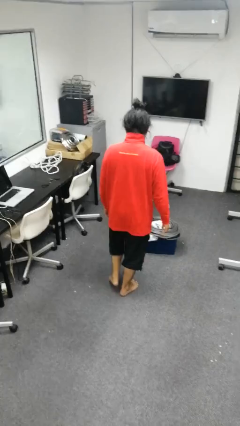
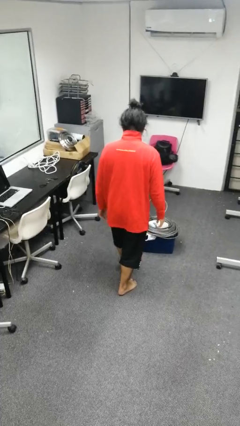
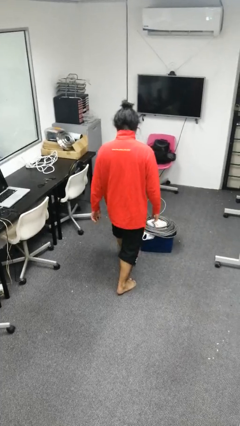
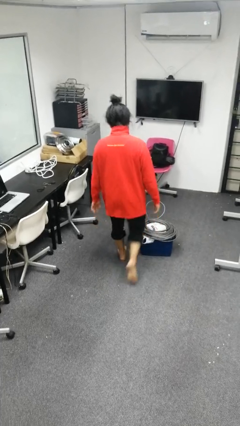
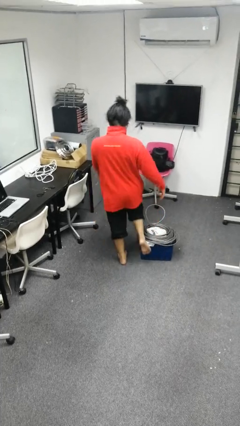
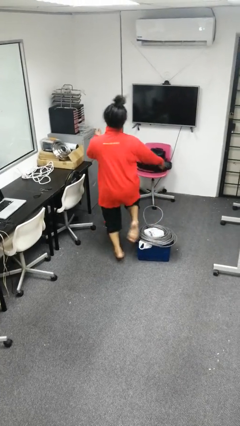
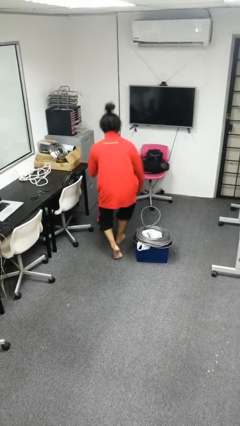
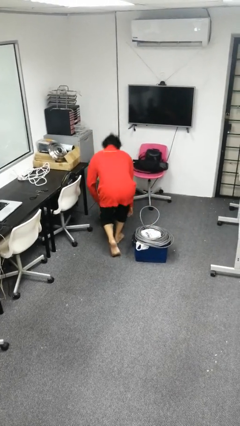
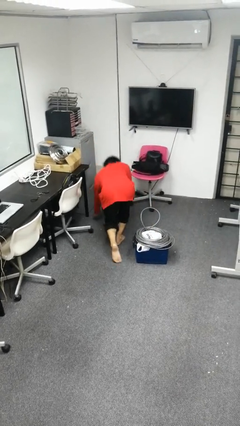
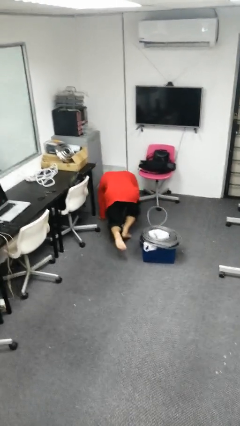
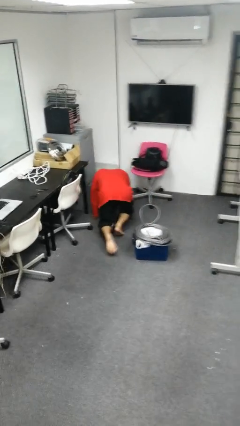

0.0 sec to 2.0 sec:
person trips on object on floor

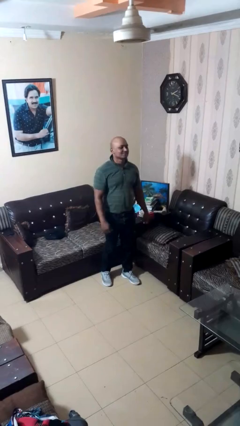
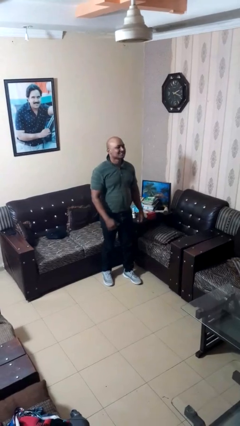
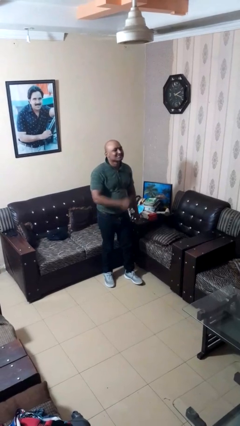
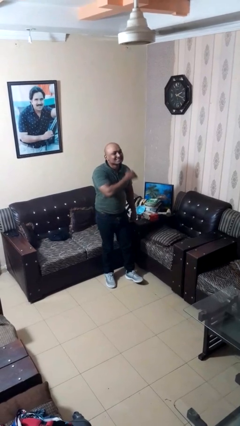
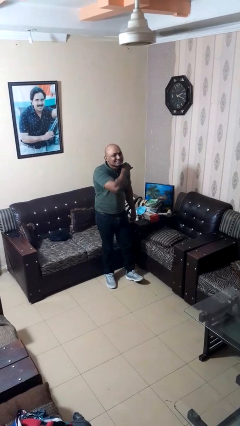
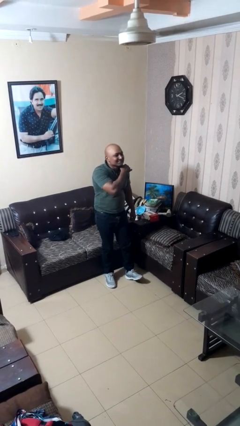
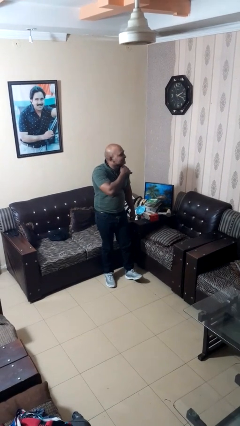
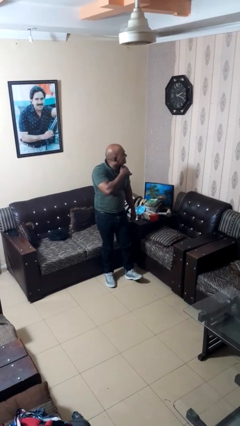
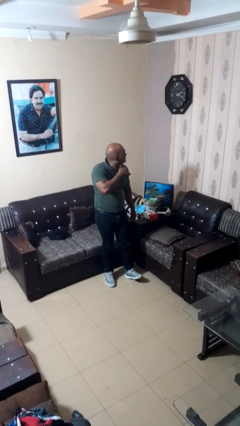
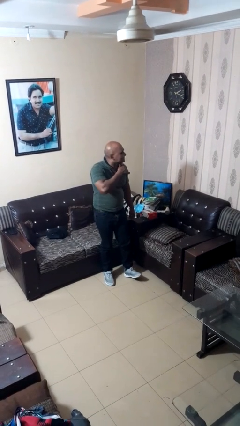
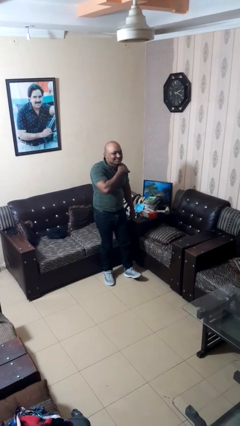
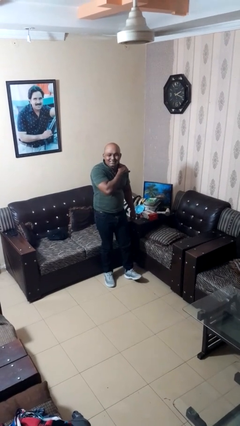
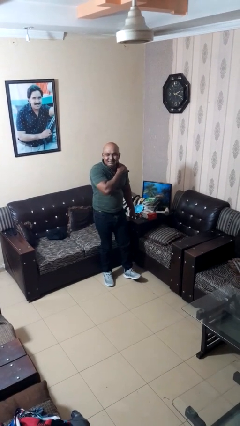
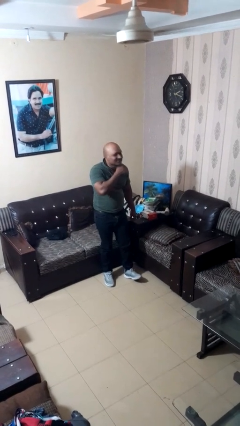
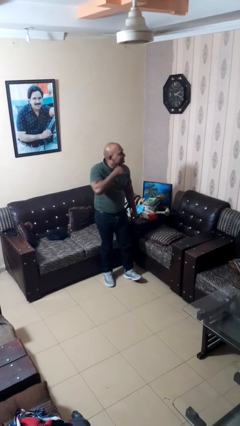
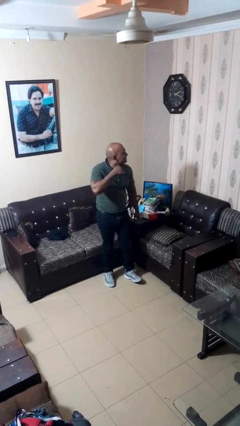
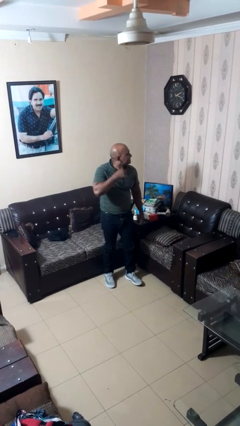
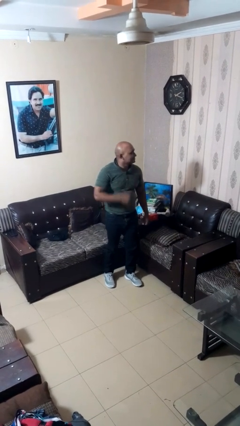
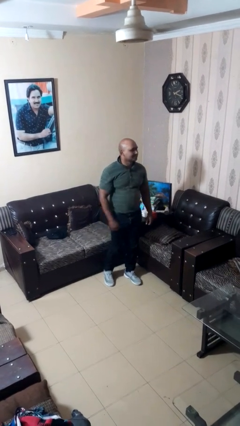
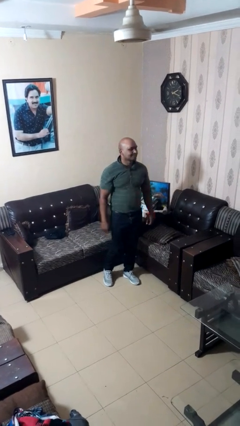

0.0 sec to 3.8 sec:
person gestures cut

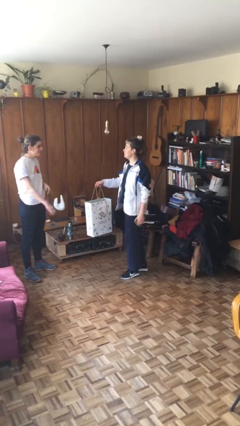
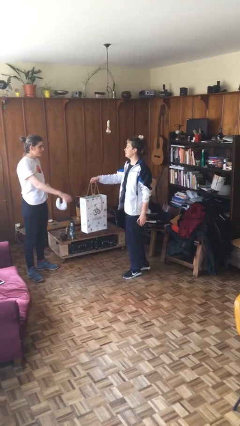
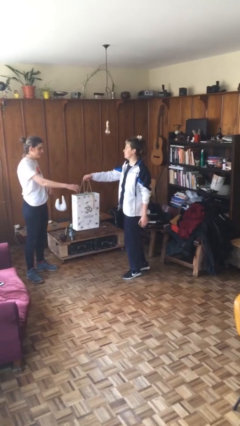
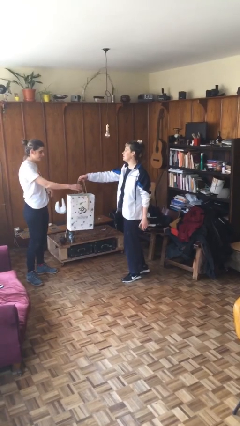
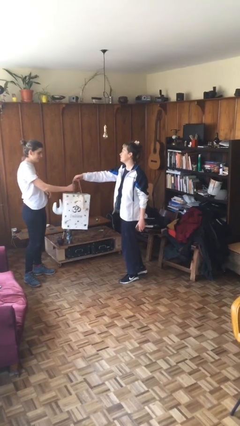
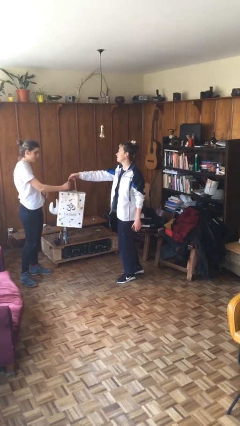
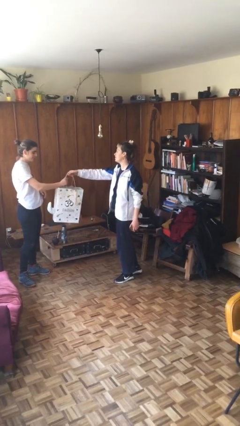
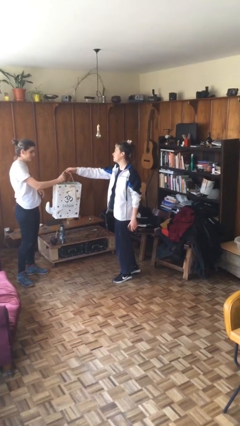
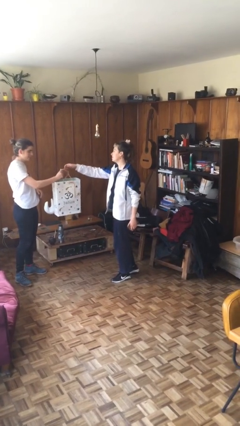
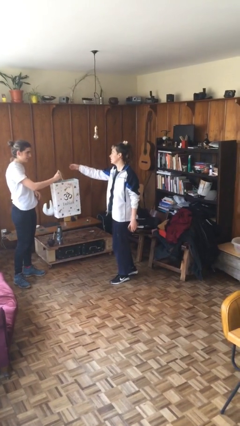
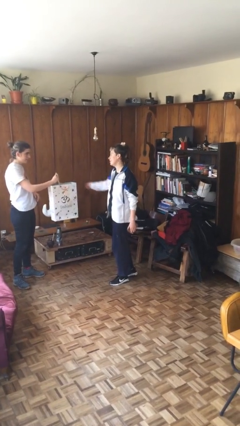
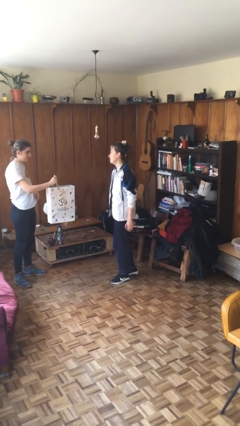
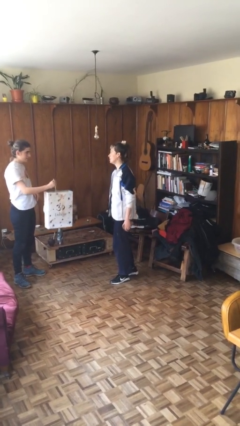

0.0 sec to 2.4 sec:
person transfers object to person

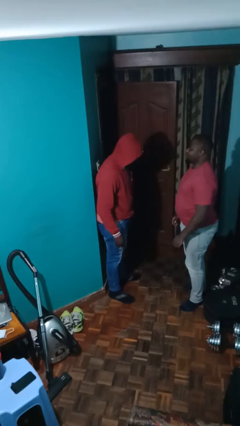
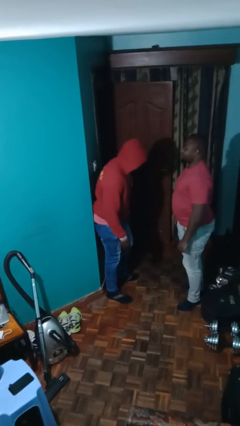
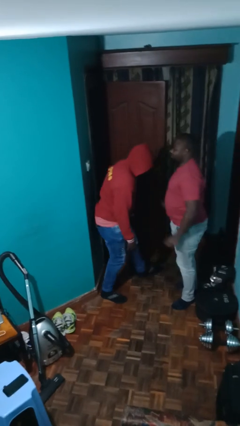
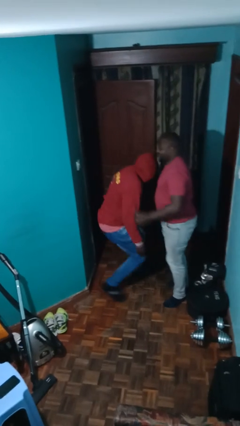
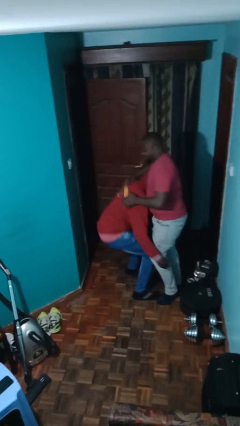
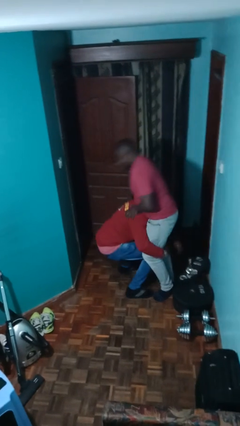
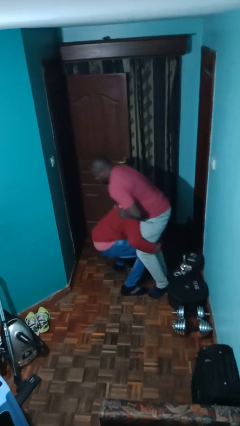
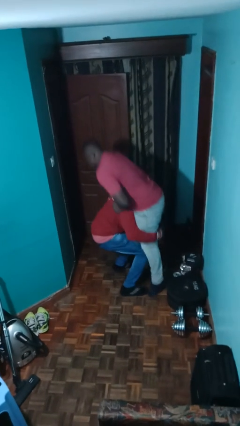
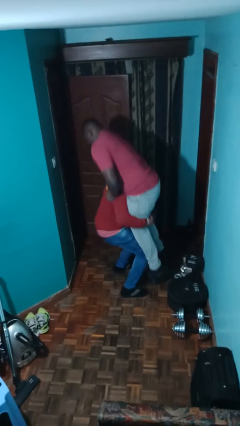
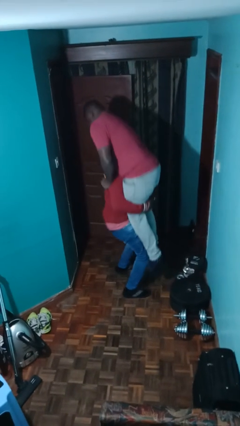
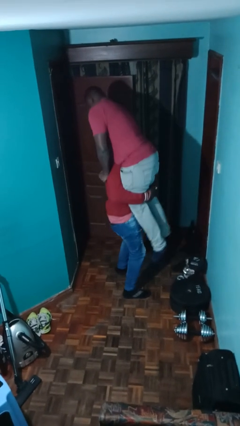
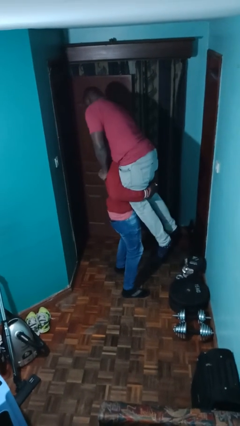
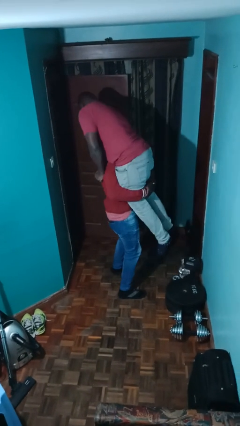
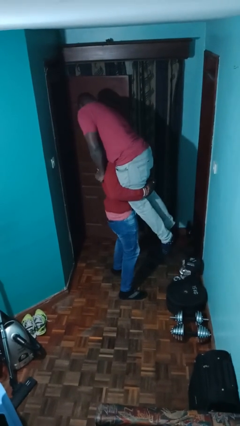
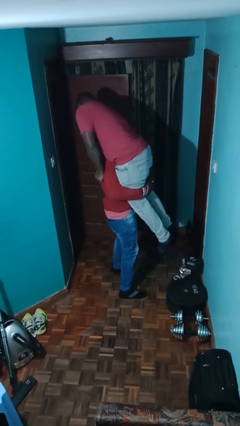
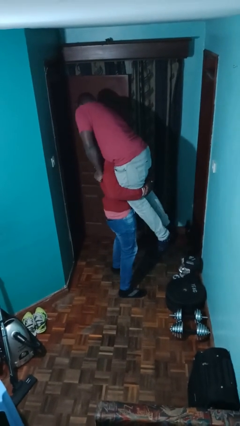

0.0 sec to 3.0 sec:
person picks up person

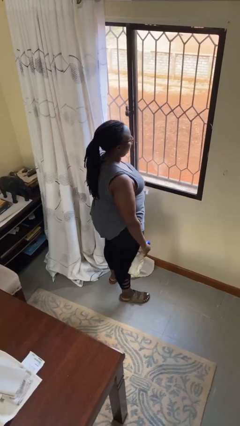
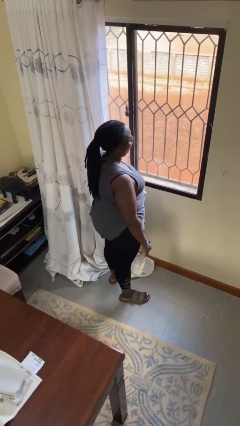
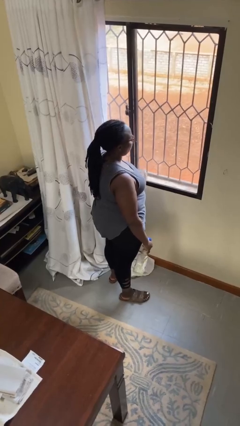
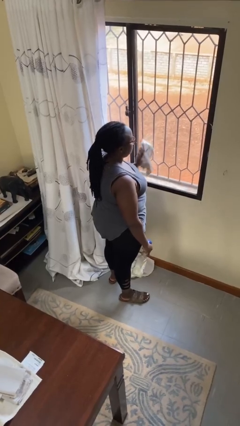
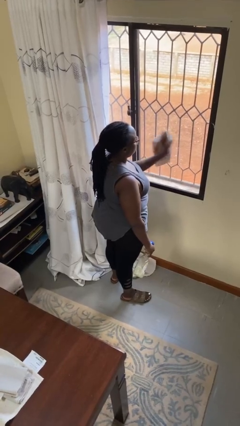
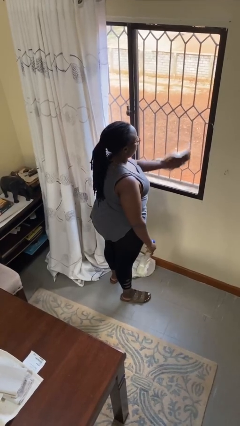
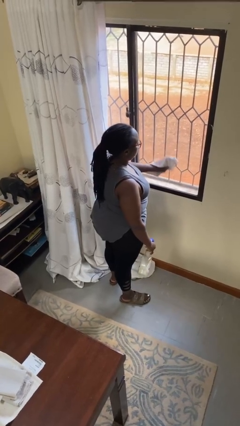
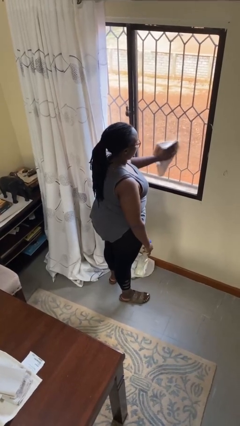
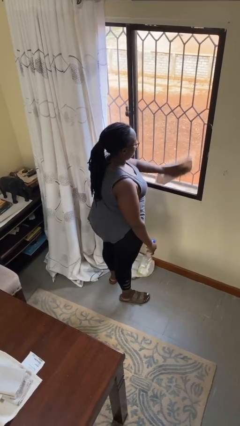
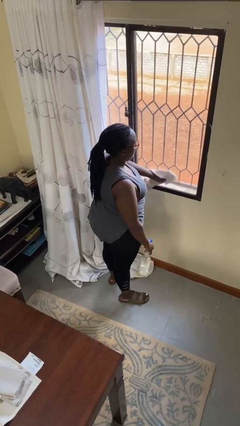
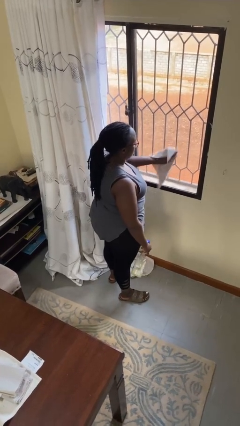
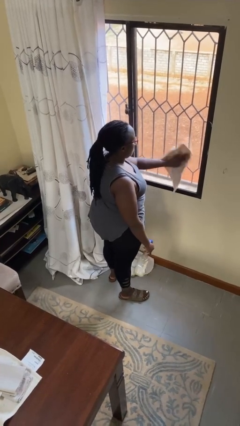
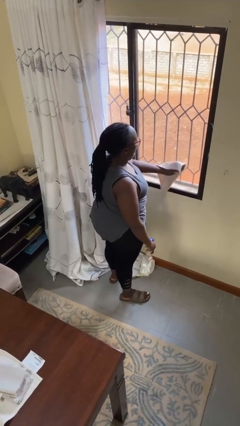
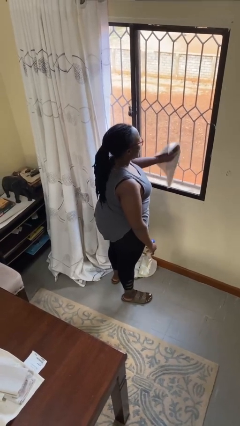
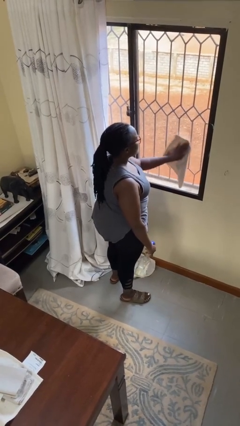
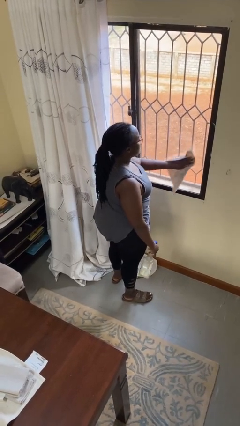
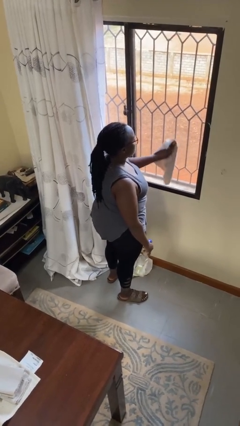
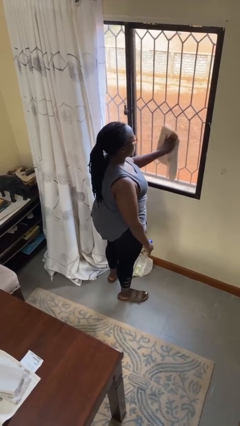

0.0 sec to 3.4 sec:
person washes window

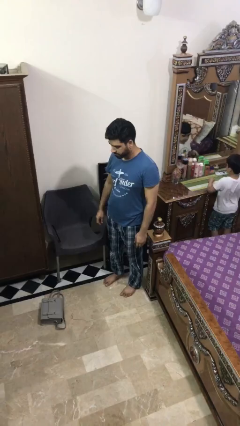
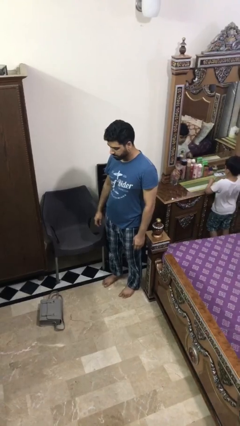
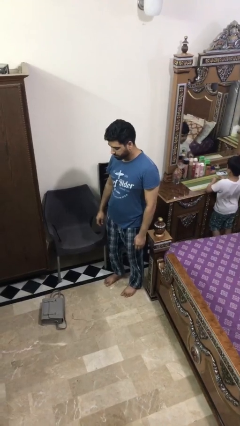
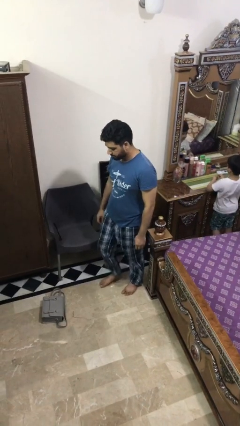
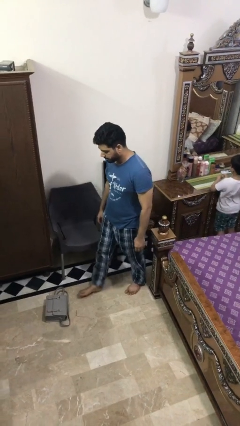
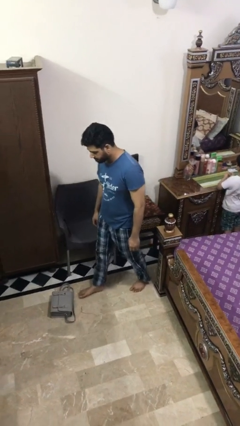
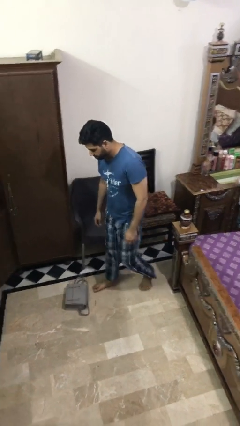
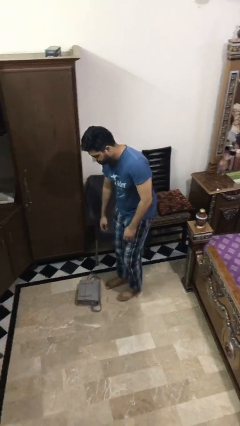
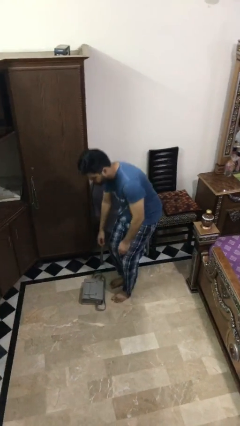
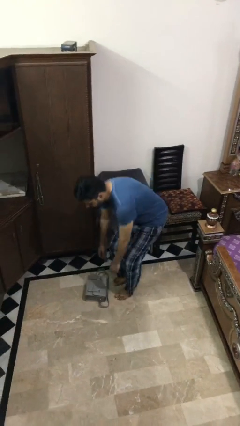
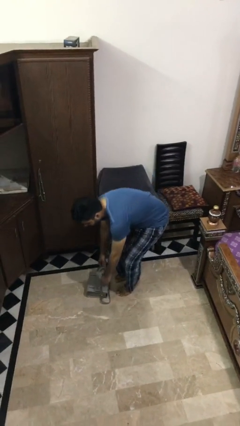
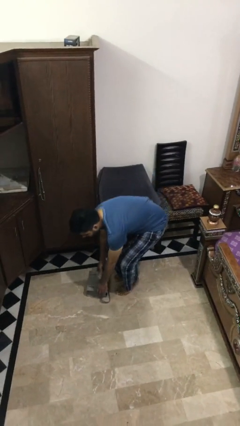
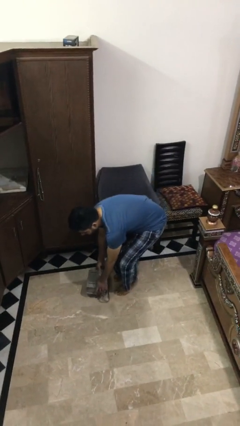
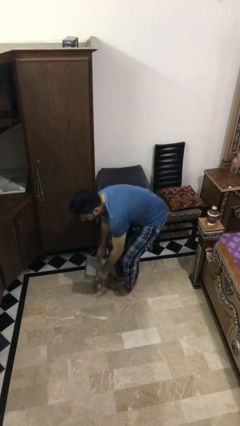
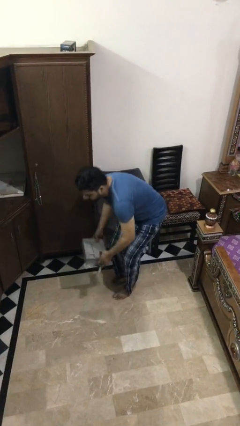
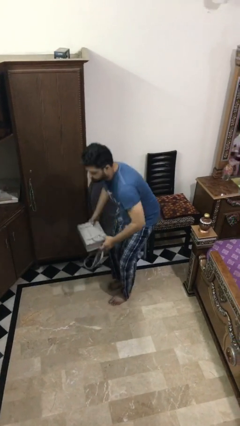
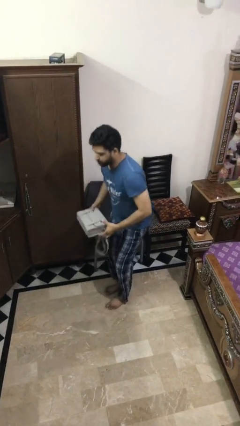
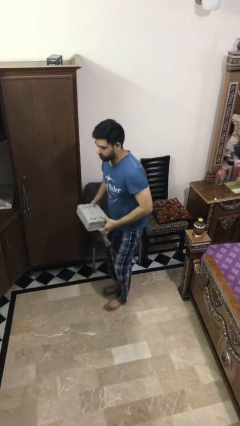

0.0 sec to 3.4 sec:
person picks up object from floor
